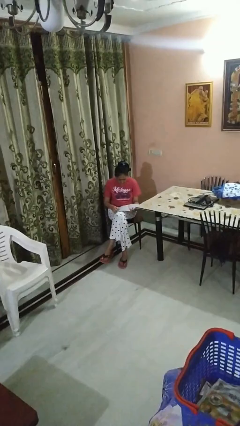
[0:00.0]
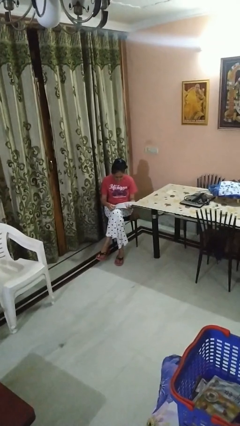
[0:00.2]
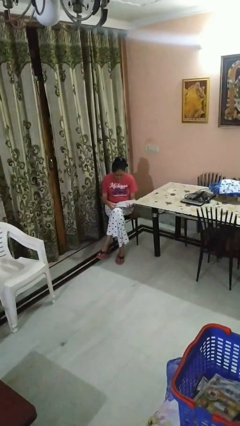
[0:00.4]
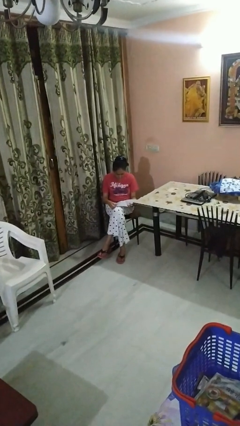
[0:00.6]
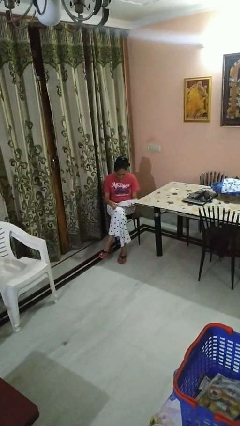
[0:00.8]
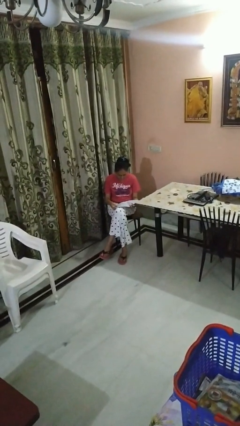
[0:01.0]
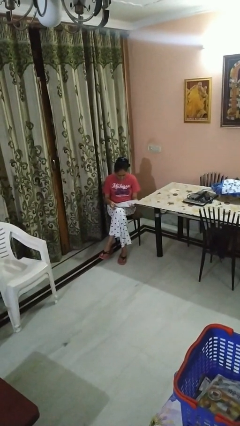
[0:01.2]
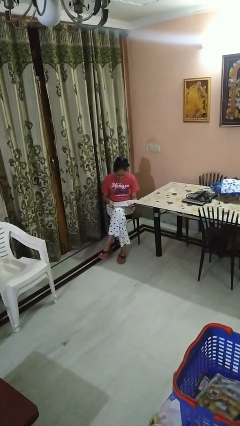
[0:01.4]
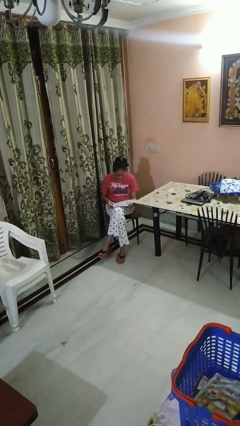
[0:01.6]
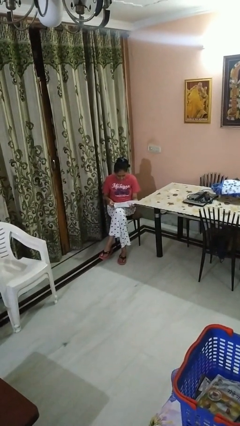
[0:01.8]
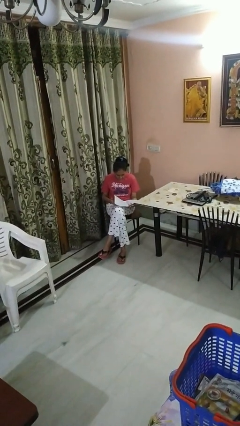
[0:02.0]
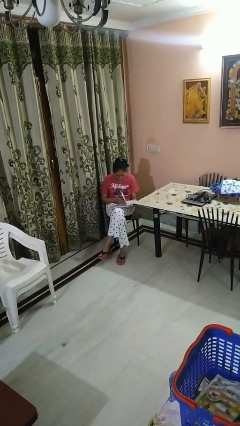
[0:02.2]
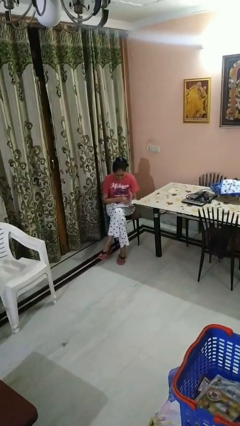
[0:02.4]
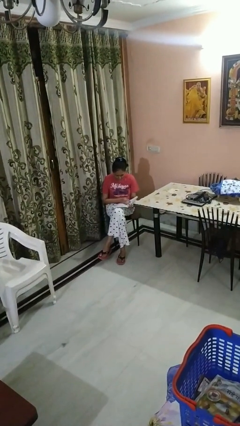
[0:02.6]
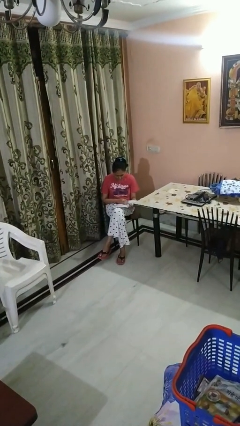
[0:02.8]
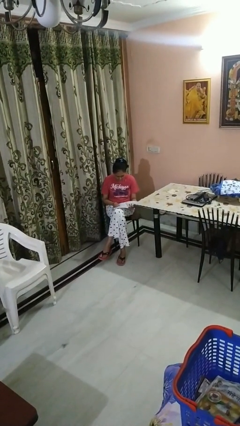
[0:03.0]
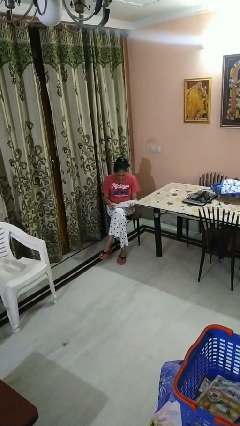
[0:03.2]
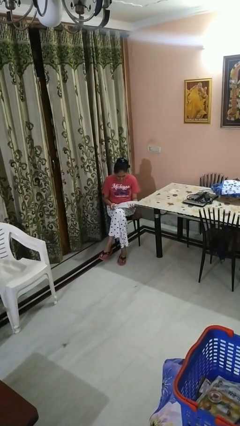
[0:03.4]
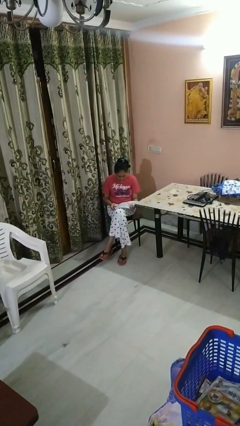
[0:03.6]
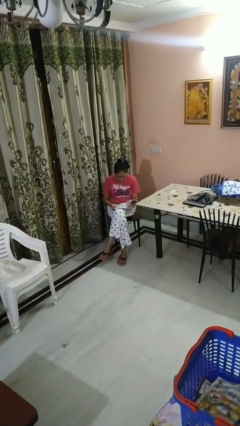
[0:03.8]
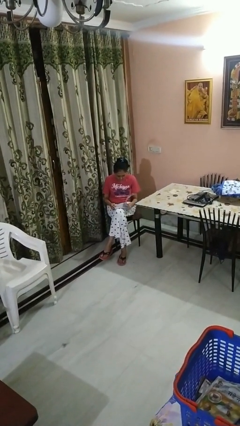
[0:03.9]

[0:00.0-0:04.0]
person reads magazine

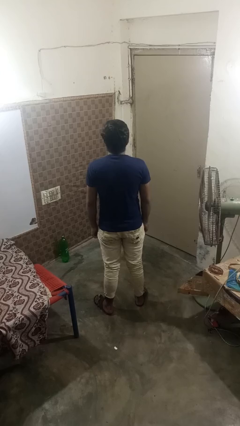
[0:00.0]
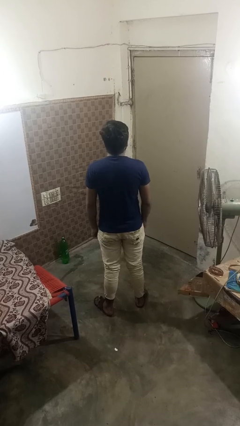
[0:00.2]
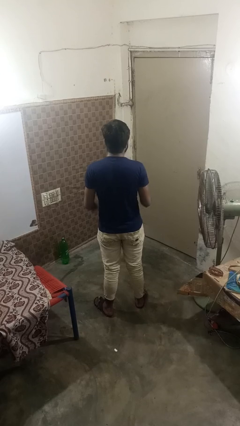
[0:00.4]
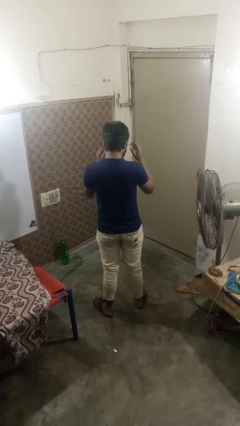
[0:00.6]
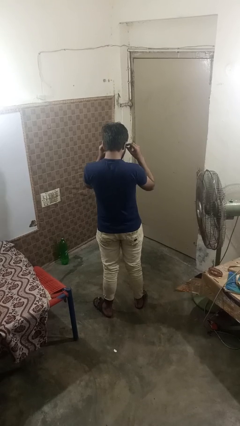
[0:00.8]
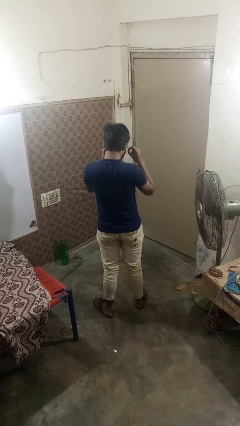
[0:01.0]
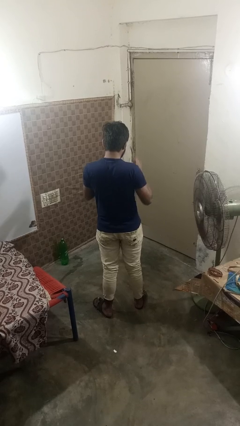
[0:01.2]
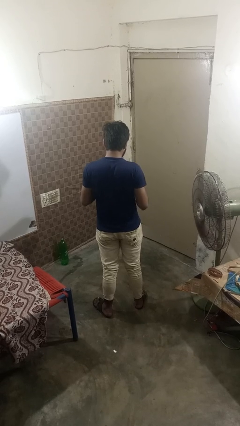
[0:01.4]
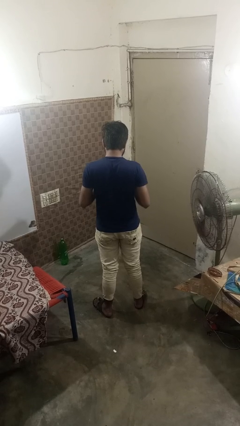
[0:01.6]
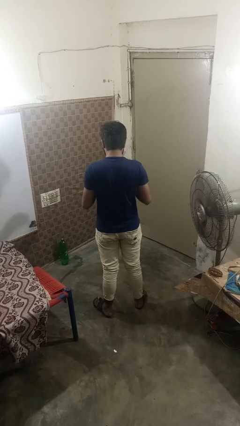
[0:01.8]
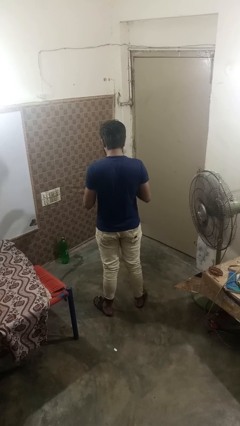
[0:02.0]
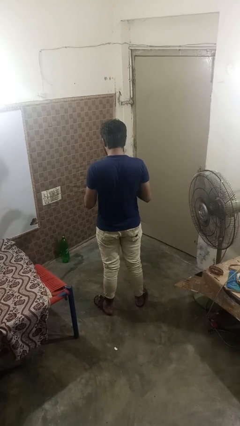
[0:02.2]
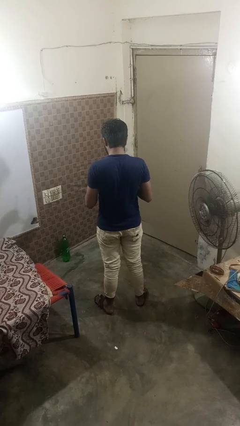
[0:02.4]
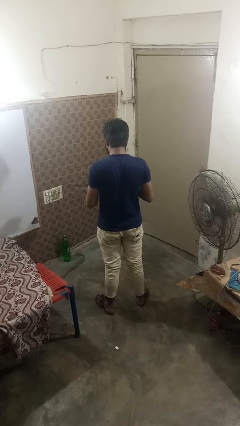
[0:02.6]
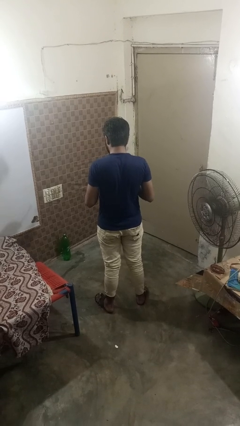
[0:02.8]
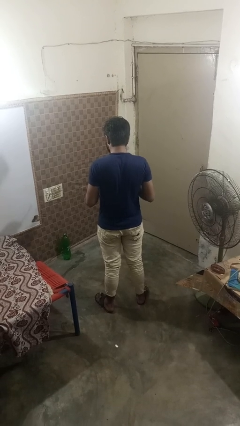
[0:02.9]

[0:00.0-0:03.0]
person takes off glasses

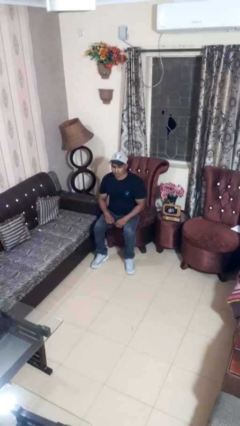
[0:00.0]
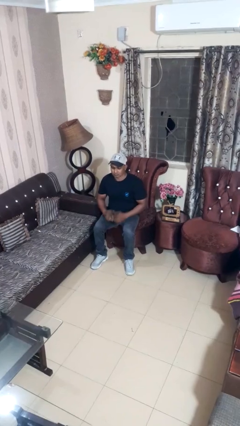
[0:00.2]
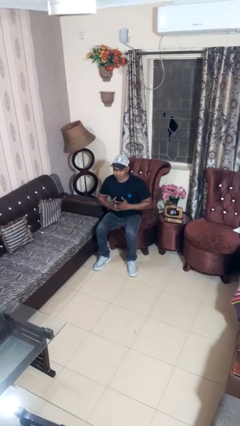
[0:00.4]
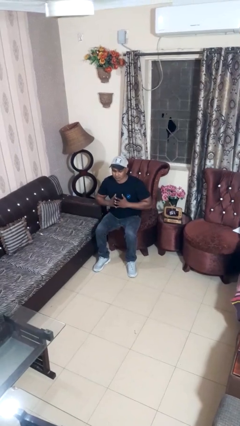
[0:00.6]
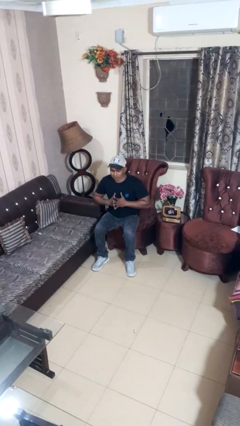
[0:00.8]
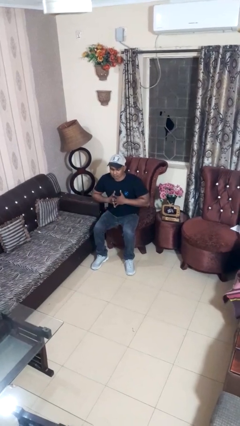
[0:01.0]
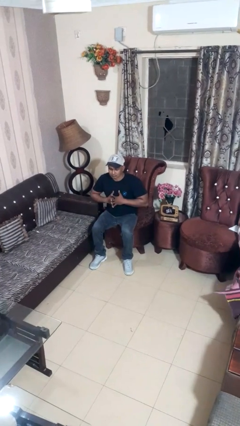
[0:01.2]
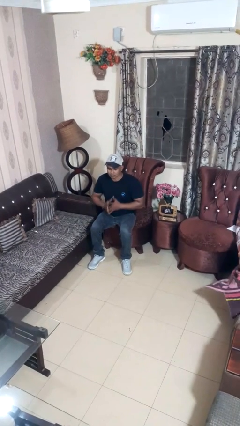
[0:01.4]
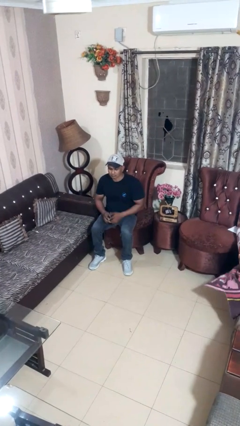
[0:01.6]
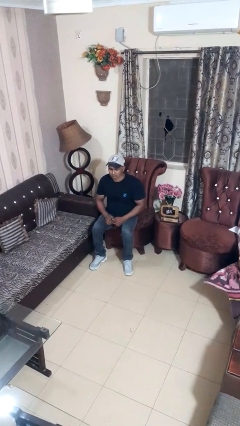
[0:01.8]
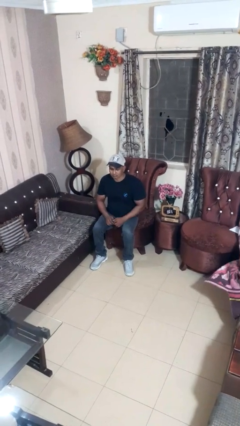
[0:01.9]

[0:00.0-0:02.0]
person cracks knuckles

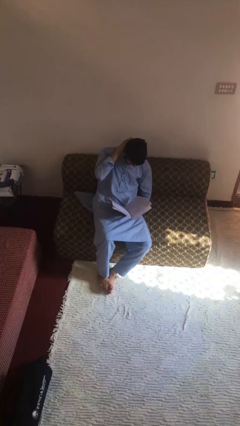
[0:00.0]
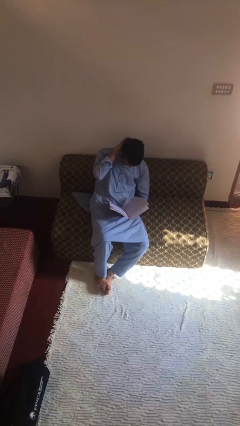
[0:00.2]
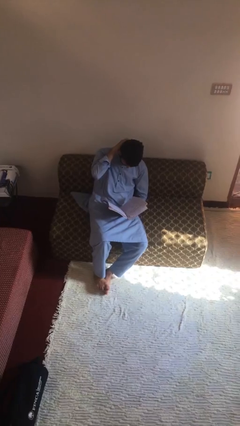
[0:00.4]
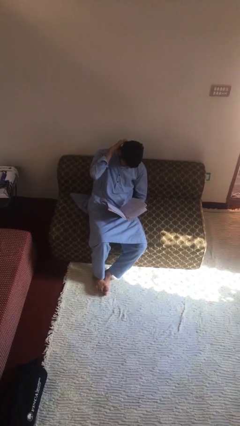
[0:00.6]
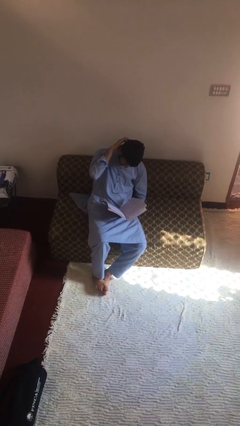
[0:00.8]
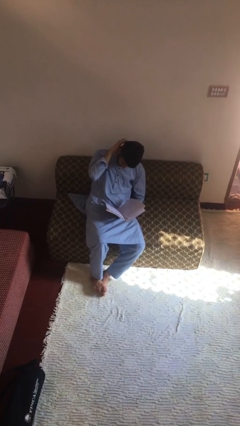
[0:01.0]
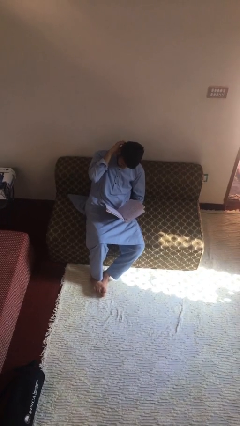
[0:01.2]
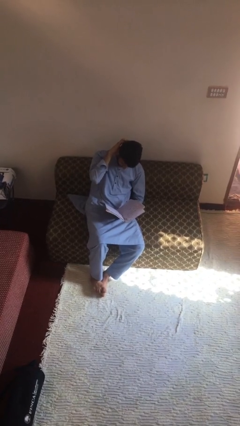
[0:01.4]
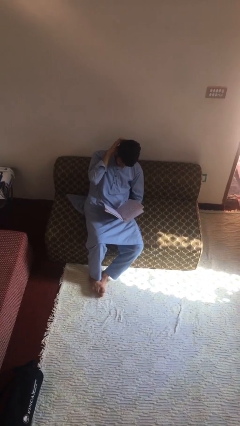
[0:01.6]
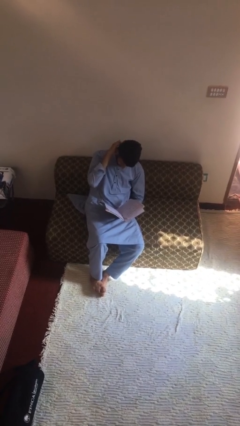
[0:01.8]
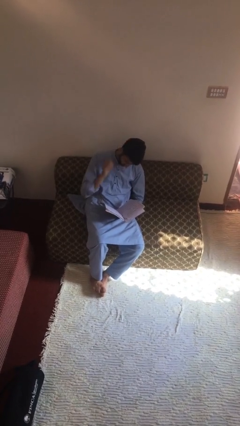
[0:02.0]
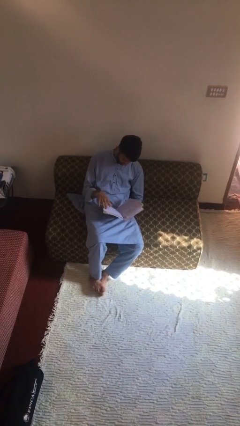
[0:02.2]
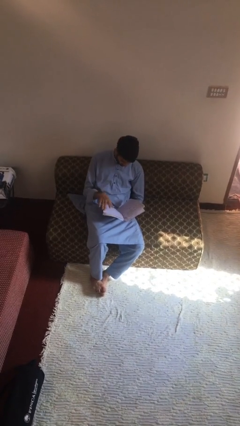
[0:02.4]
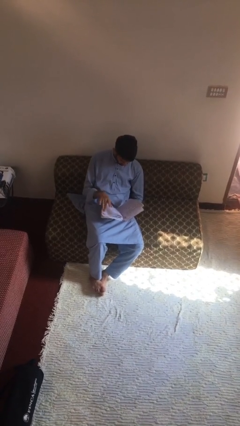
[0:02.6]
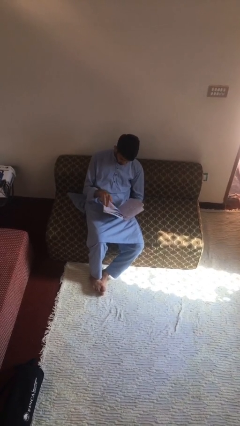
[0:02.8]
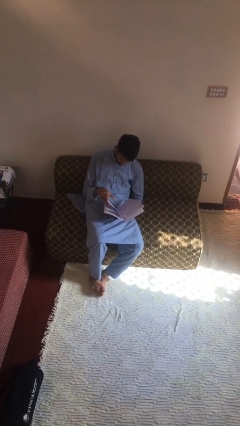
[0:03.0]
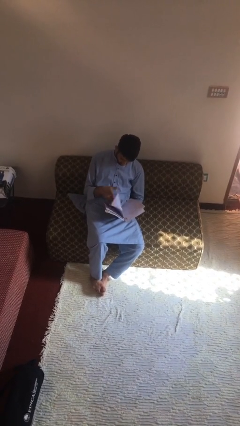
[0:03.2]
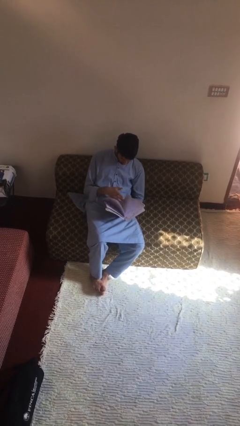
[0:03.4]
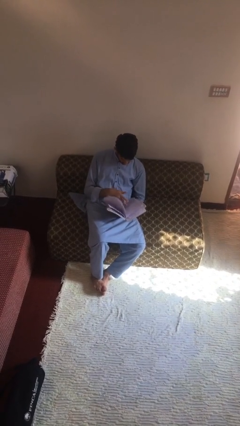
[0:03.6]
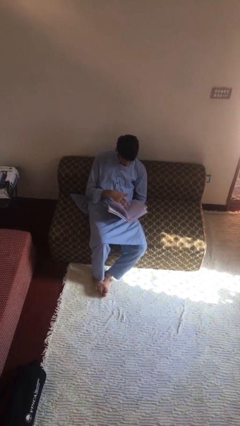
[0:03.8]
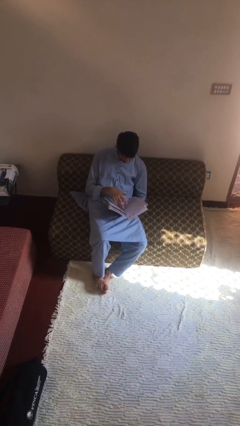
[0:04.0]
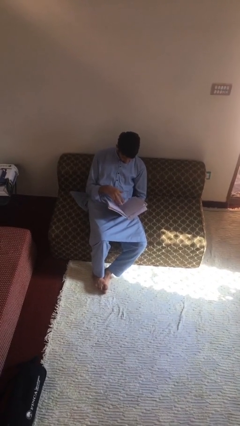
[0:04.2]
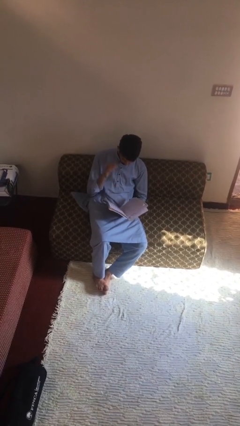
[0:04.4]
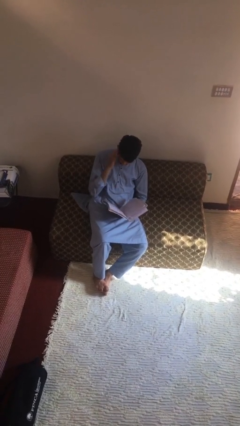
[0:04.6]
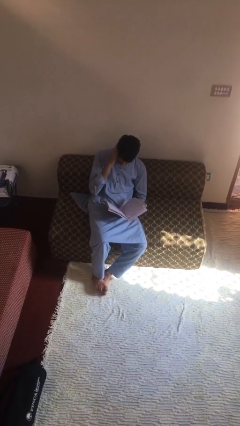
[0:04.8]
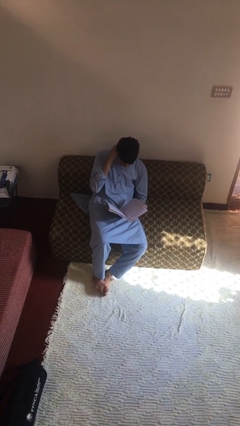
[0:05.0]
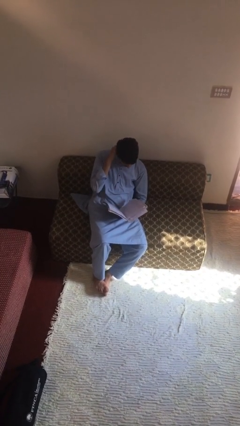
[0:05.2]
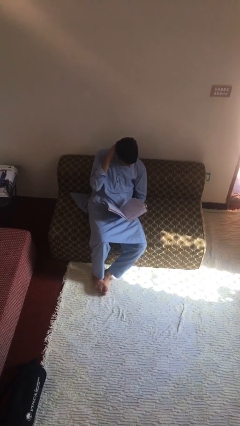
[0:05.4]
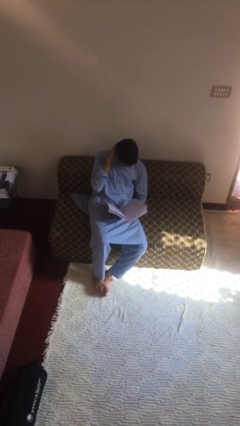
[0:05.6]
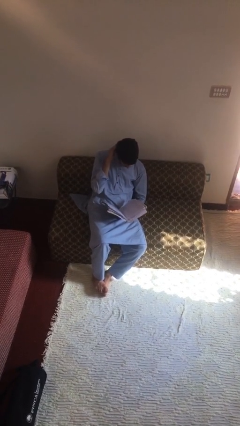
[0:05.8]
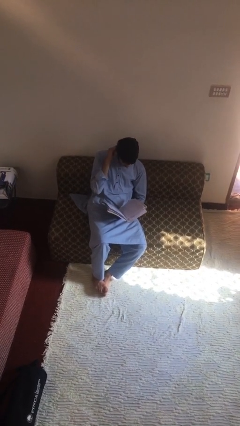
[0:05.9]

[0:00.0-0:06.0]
person reads document

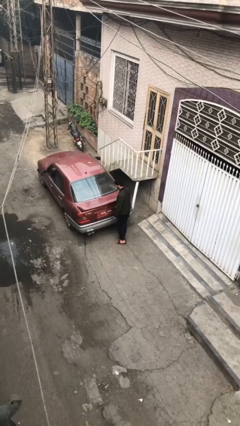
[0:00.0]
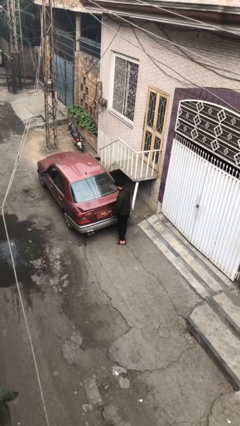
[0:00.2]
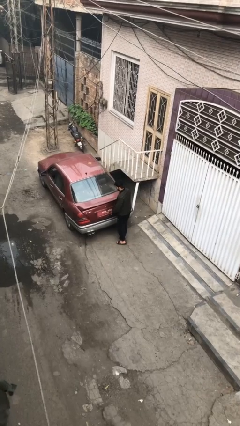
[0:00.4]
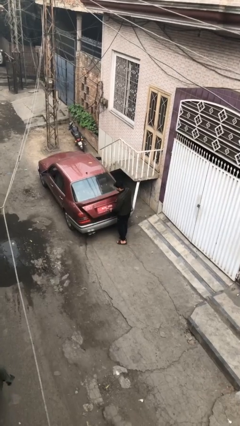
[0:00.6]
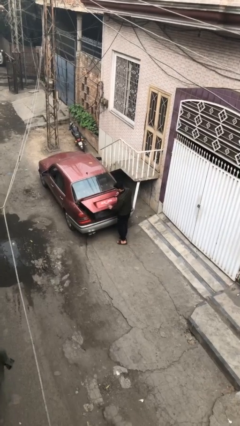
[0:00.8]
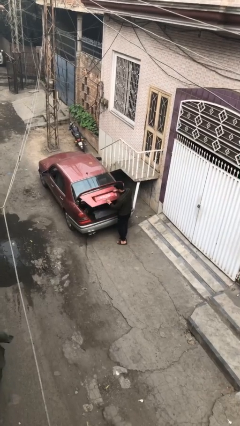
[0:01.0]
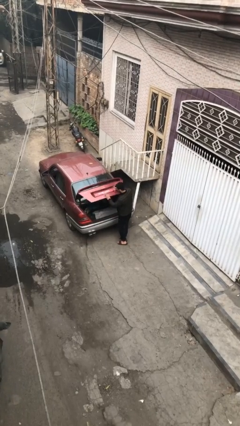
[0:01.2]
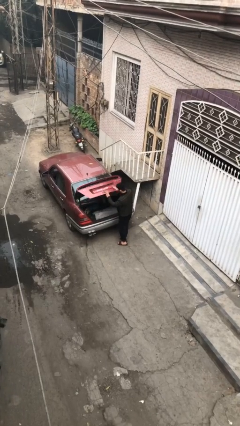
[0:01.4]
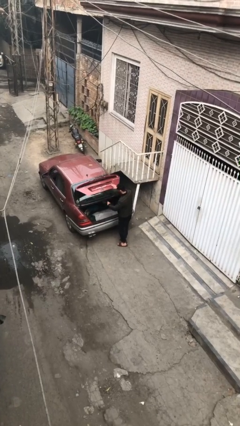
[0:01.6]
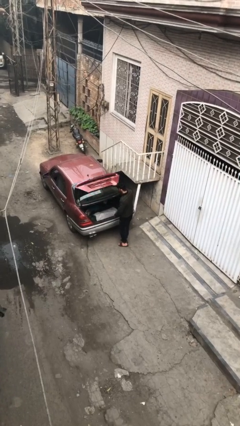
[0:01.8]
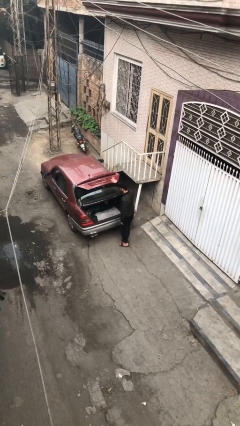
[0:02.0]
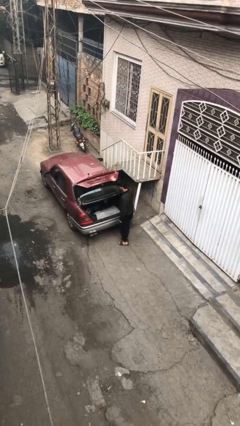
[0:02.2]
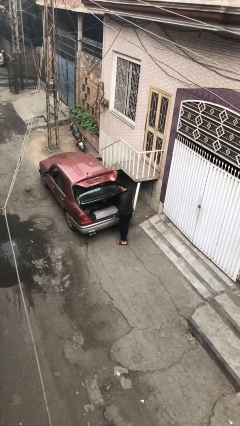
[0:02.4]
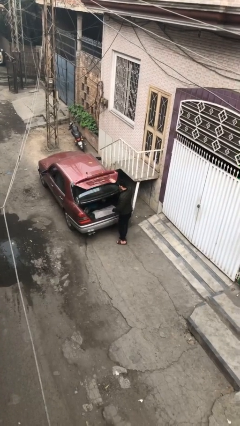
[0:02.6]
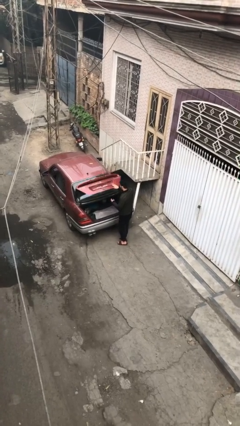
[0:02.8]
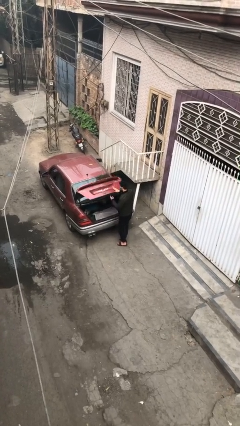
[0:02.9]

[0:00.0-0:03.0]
person opens car trunk
